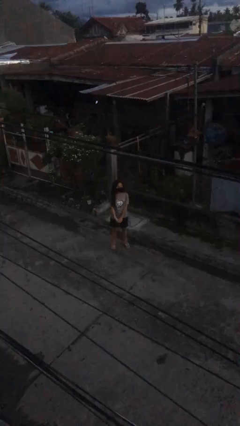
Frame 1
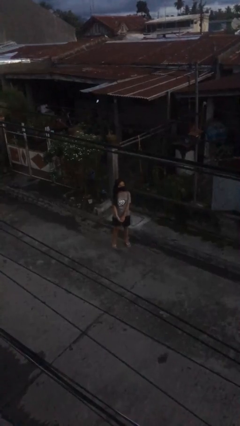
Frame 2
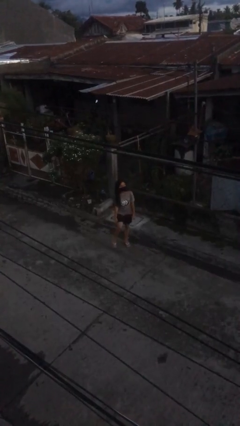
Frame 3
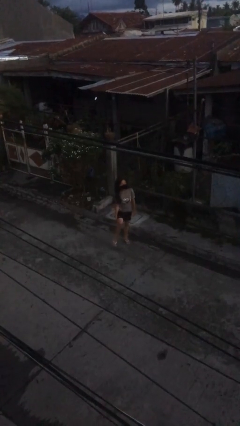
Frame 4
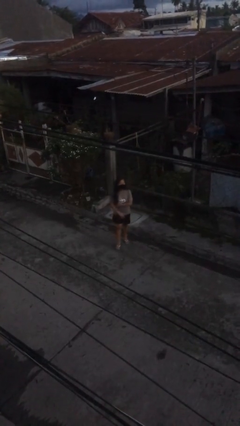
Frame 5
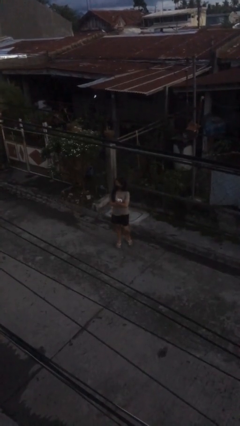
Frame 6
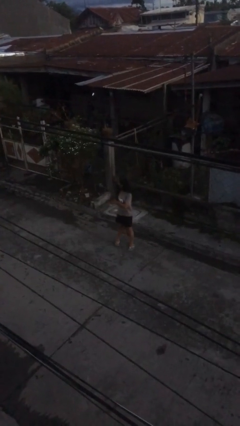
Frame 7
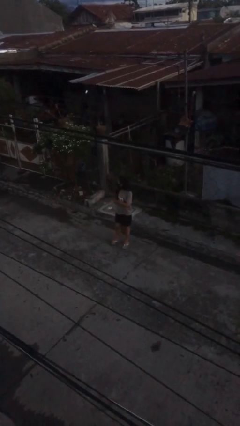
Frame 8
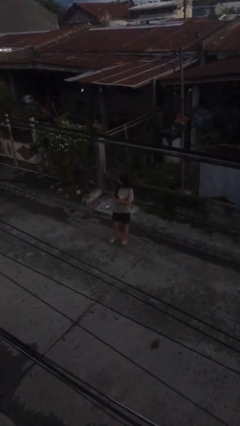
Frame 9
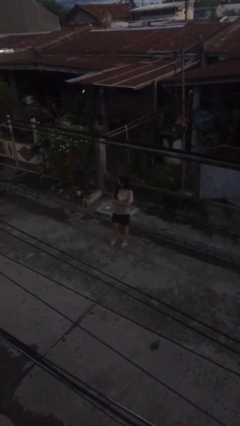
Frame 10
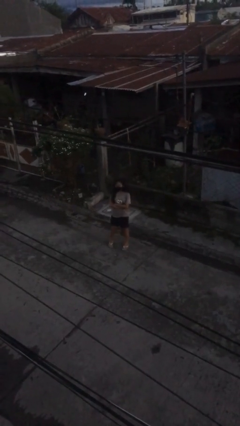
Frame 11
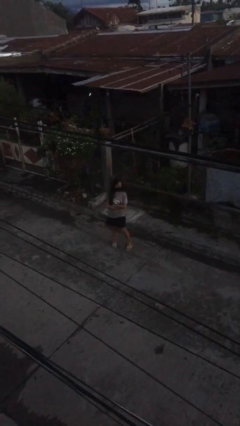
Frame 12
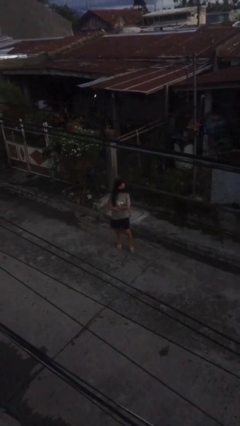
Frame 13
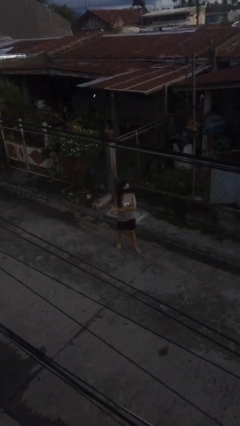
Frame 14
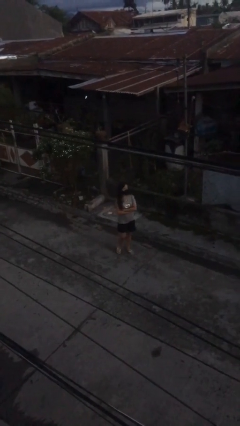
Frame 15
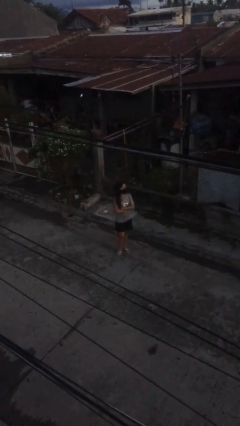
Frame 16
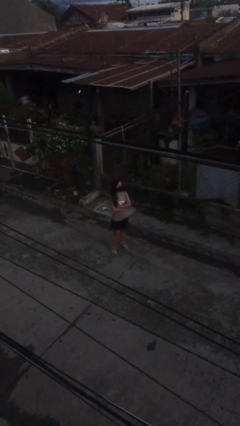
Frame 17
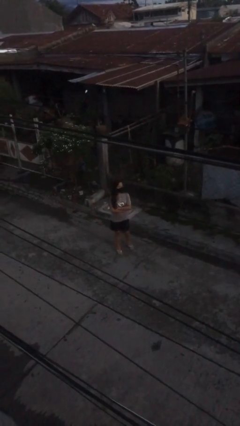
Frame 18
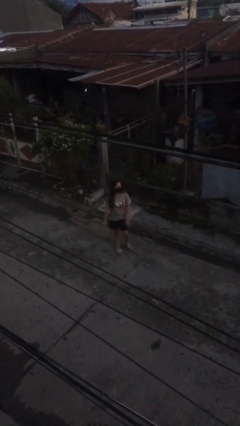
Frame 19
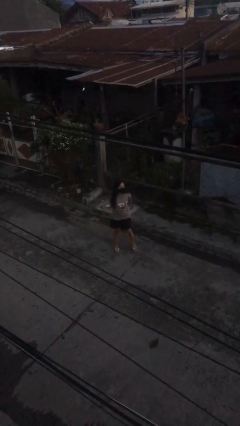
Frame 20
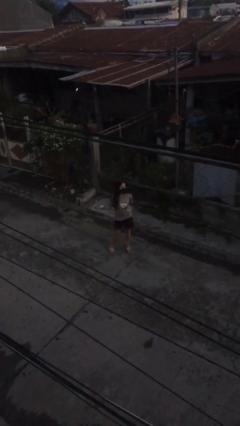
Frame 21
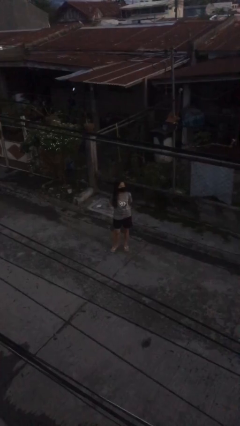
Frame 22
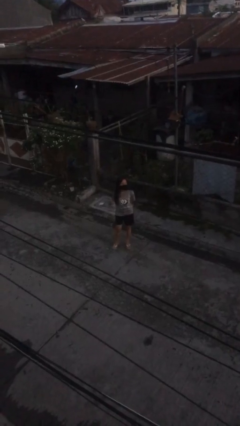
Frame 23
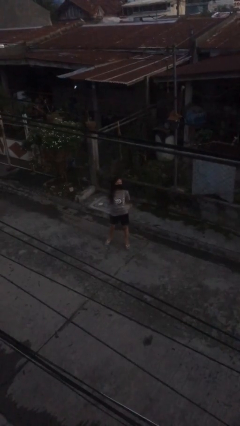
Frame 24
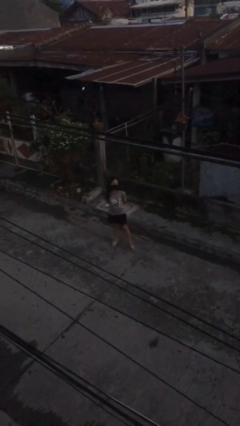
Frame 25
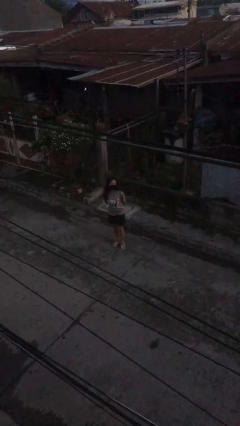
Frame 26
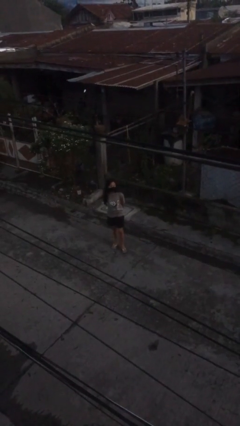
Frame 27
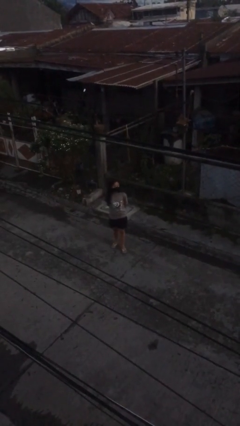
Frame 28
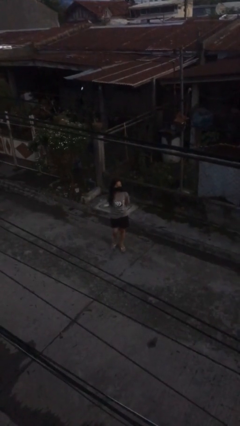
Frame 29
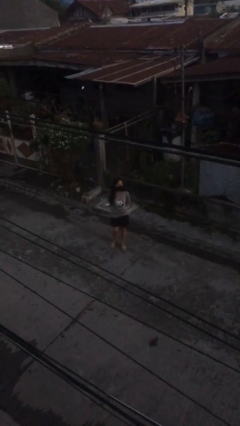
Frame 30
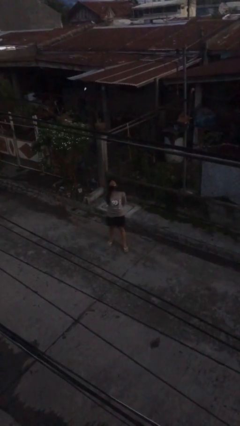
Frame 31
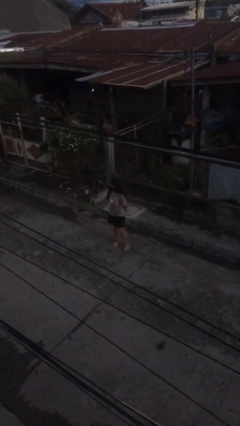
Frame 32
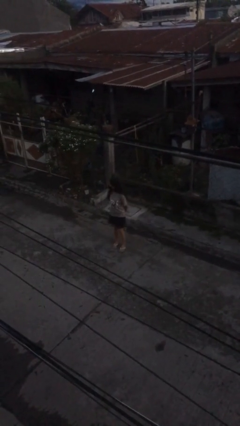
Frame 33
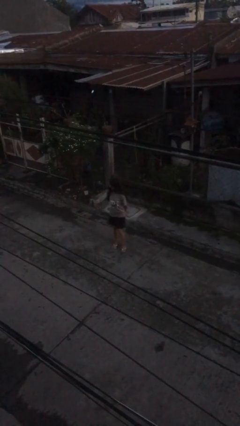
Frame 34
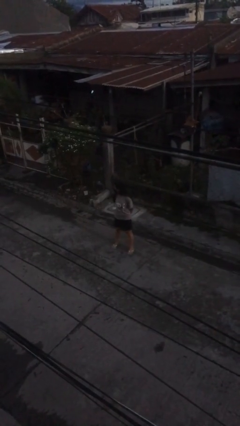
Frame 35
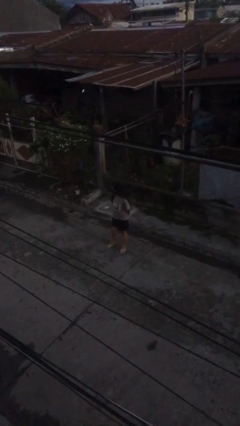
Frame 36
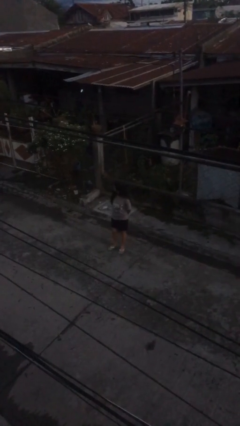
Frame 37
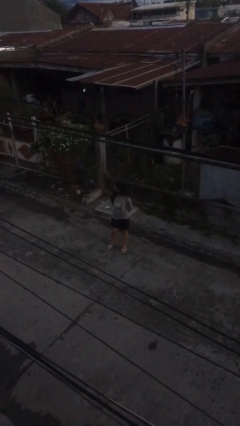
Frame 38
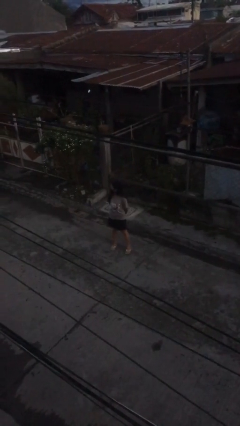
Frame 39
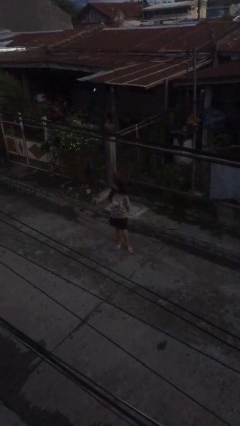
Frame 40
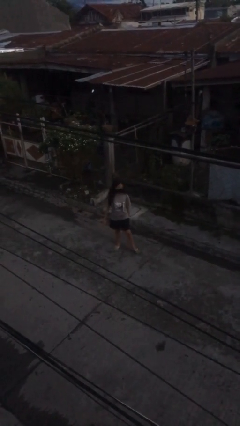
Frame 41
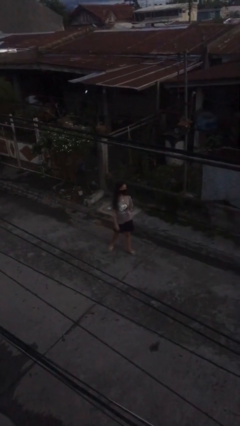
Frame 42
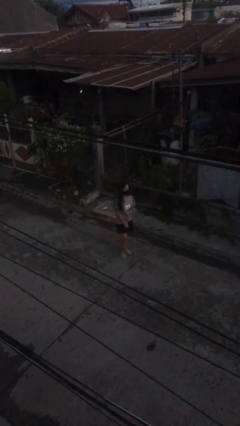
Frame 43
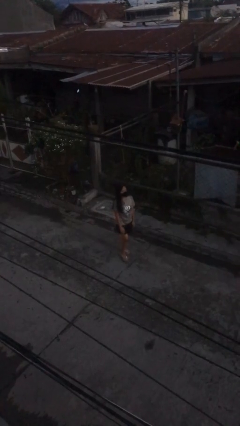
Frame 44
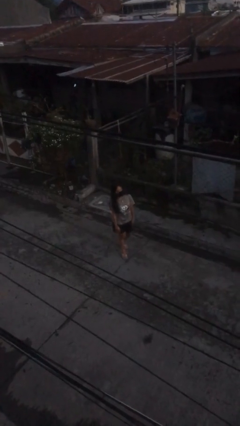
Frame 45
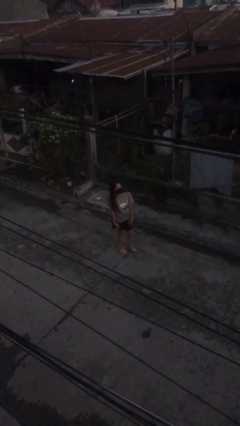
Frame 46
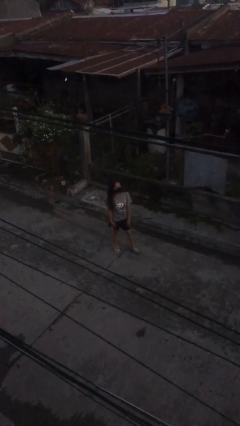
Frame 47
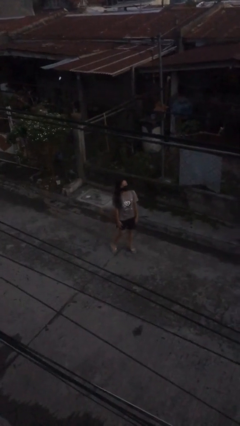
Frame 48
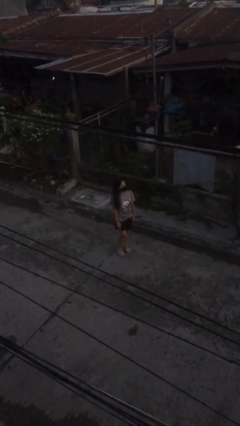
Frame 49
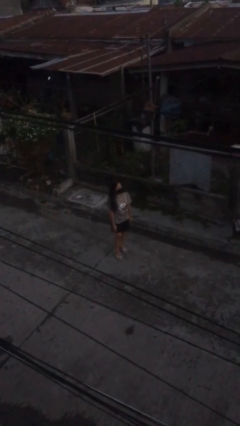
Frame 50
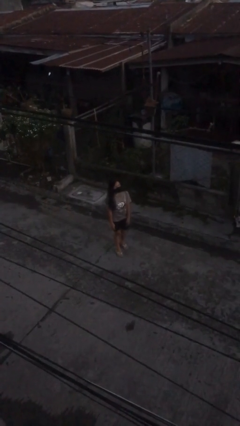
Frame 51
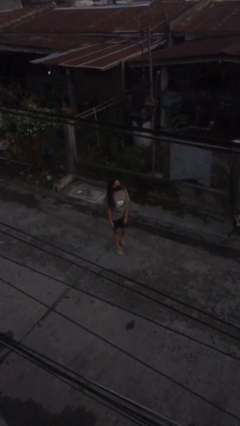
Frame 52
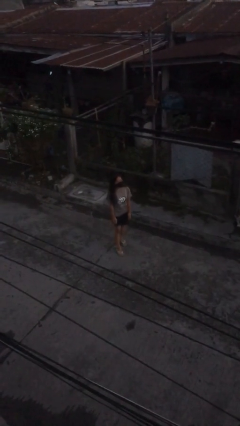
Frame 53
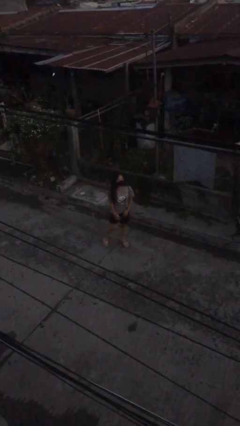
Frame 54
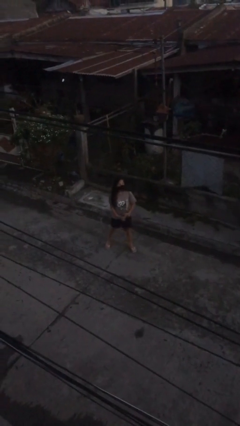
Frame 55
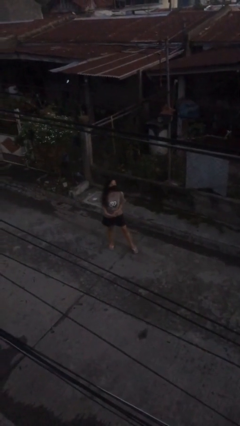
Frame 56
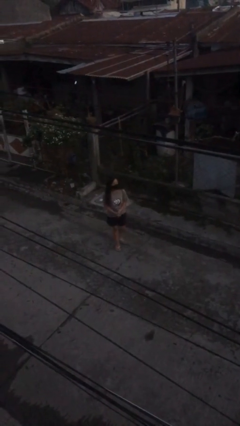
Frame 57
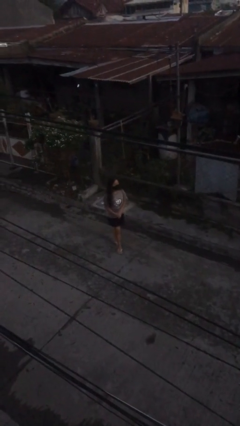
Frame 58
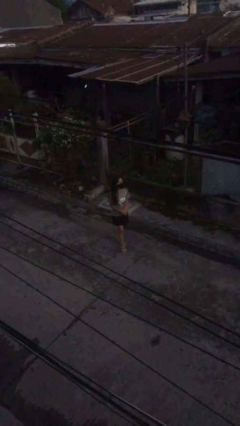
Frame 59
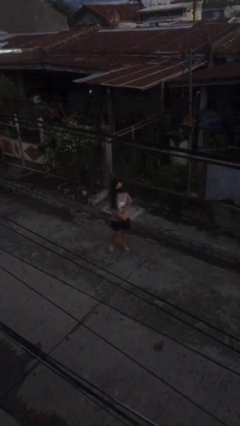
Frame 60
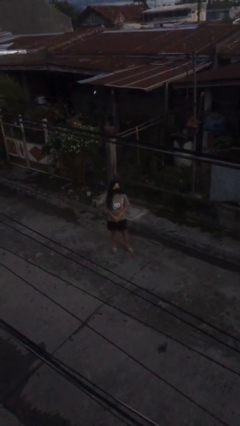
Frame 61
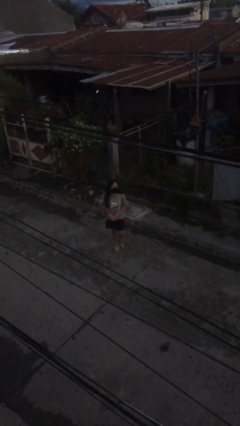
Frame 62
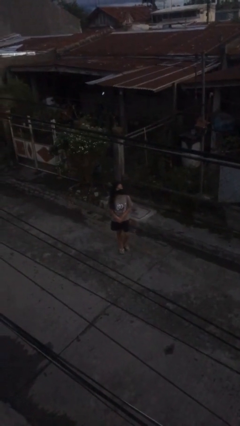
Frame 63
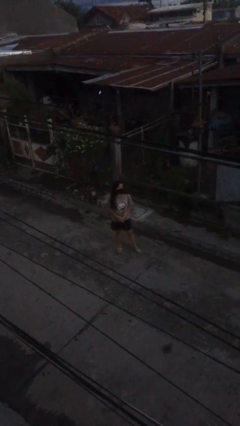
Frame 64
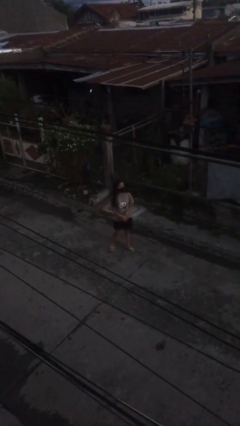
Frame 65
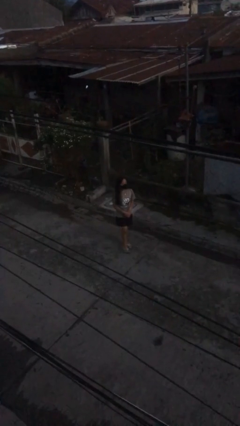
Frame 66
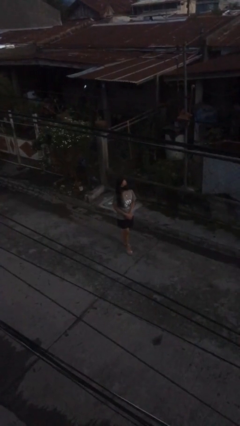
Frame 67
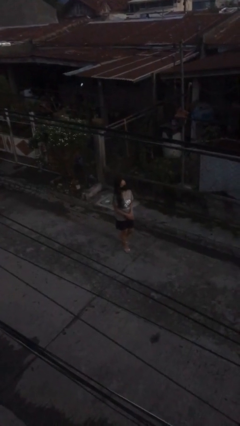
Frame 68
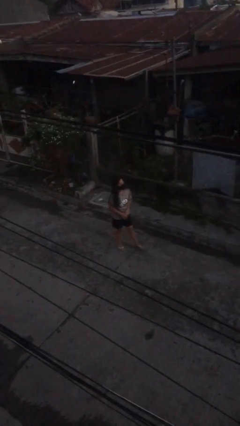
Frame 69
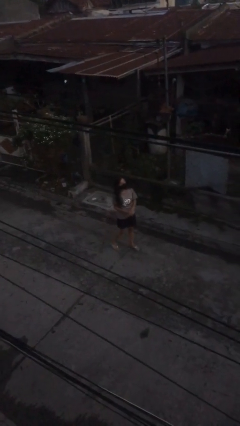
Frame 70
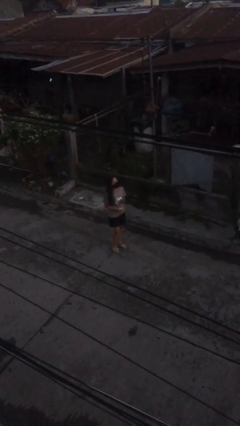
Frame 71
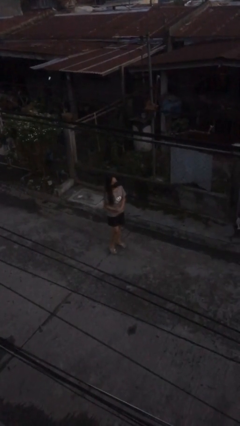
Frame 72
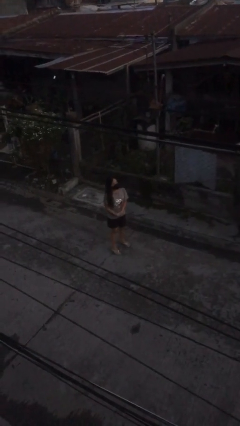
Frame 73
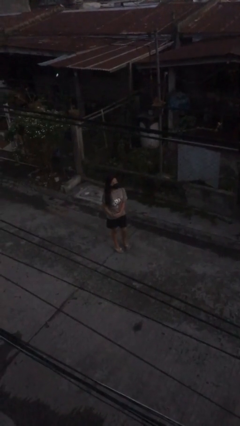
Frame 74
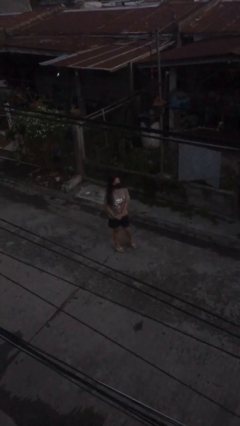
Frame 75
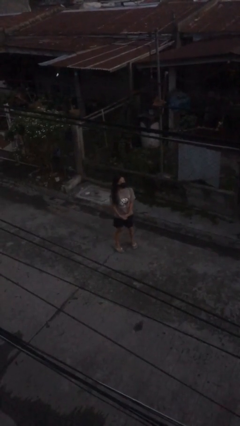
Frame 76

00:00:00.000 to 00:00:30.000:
person walks

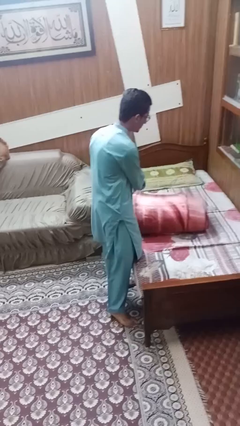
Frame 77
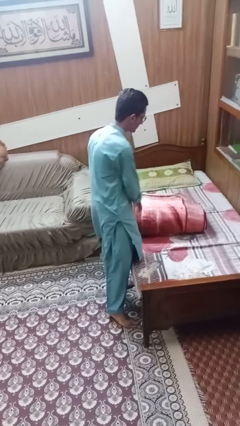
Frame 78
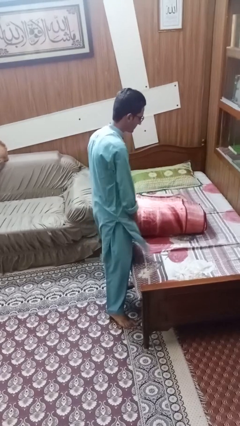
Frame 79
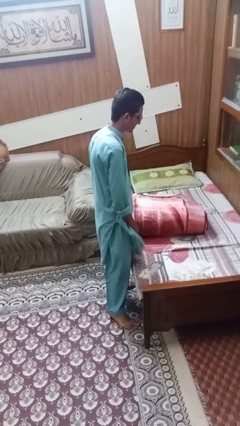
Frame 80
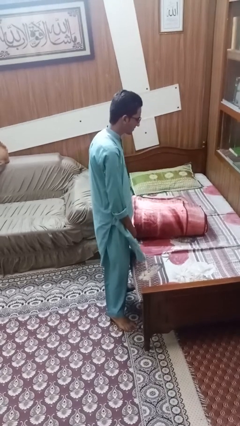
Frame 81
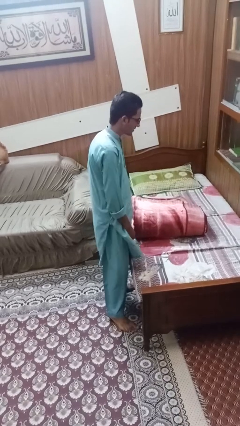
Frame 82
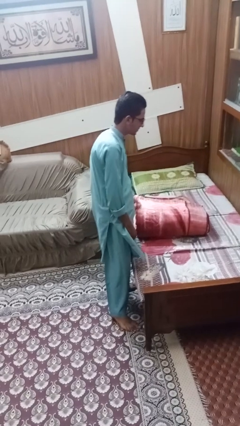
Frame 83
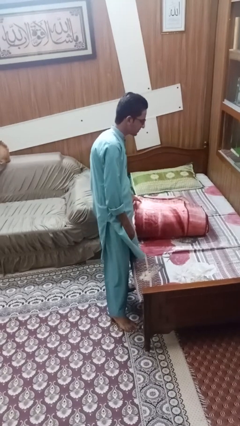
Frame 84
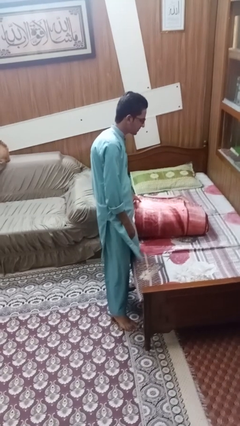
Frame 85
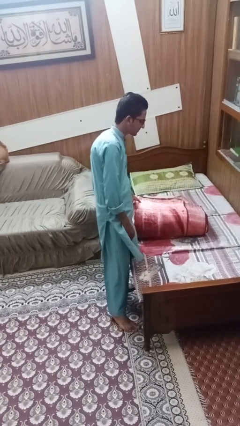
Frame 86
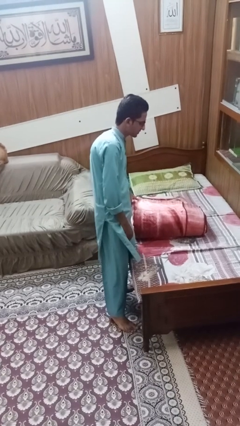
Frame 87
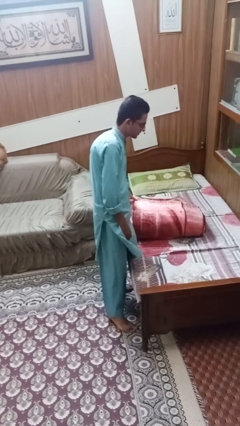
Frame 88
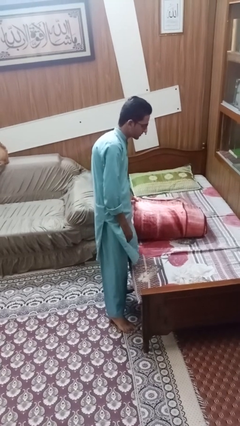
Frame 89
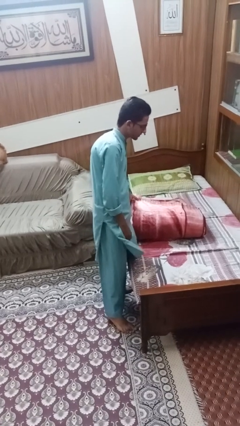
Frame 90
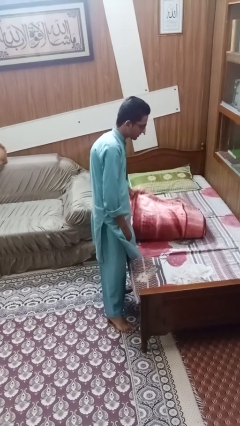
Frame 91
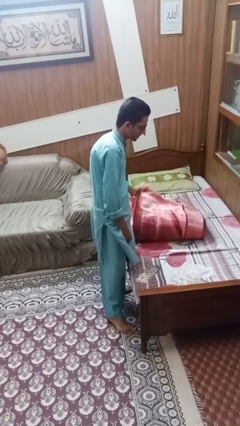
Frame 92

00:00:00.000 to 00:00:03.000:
person folds blanket
